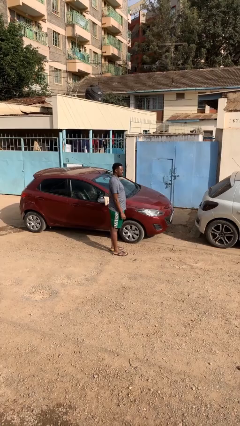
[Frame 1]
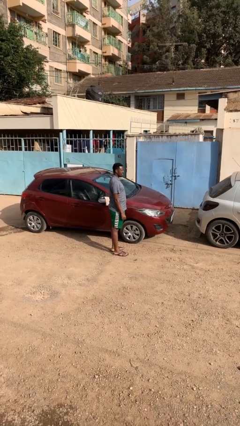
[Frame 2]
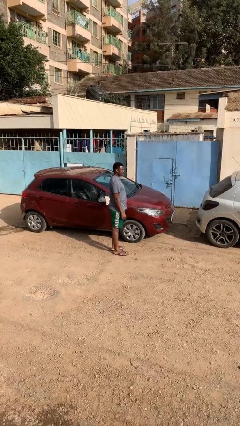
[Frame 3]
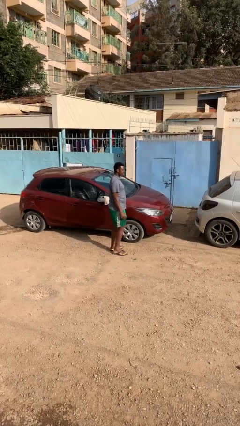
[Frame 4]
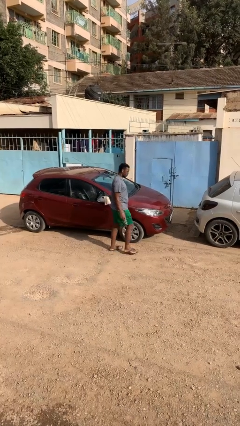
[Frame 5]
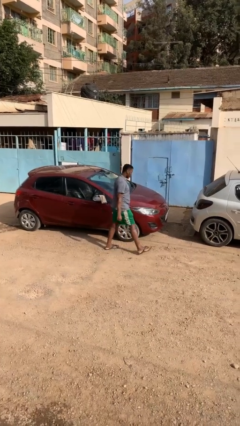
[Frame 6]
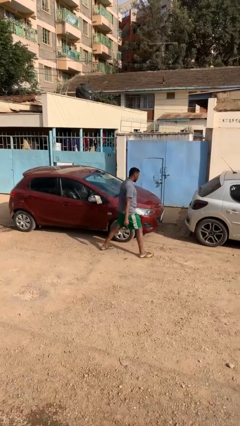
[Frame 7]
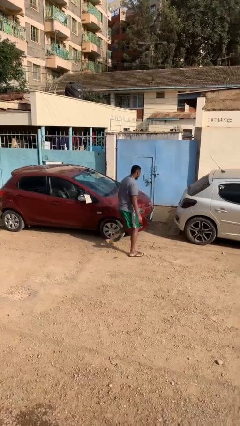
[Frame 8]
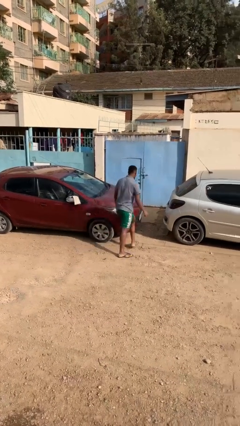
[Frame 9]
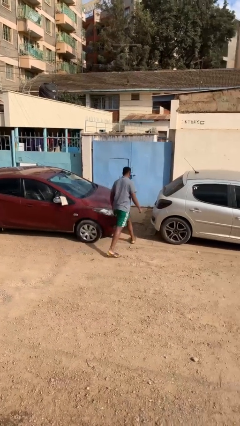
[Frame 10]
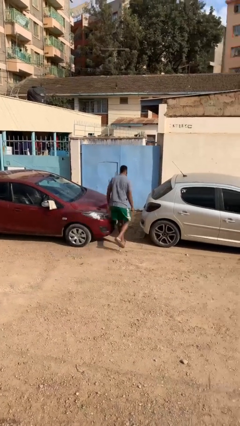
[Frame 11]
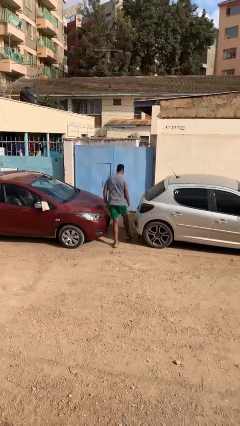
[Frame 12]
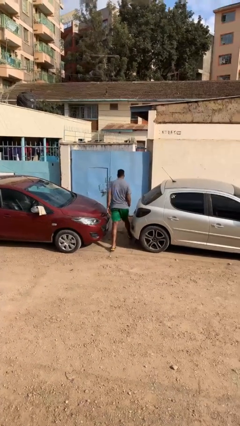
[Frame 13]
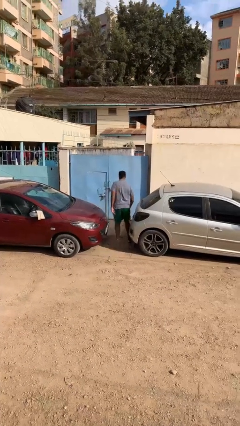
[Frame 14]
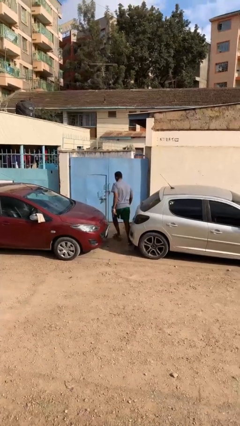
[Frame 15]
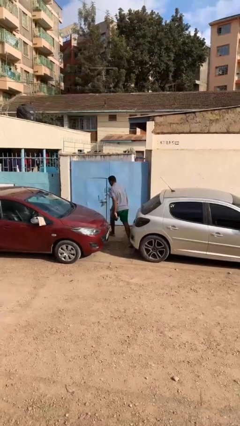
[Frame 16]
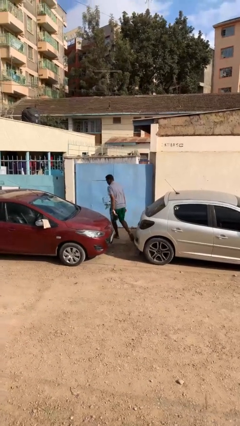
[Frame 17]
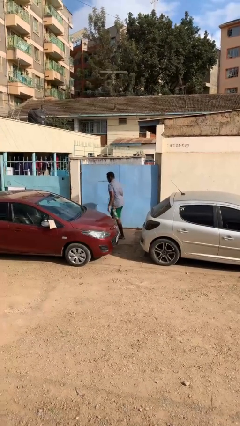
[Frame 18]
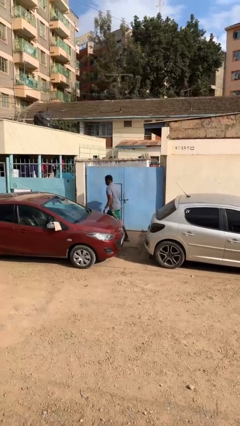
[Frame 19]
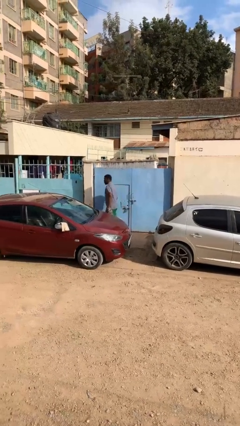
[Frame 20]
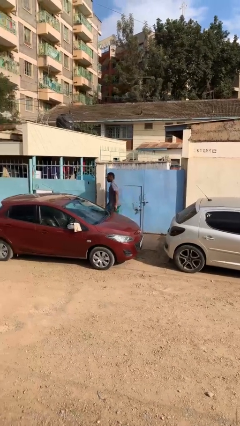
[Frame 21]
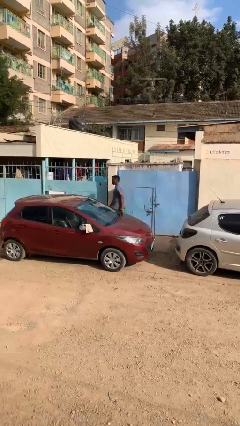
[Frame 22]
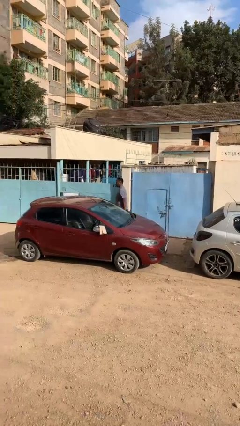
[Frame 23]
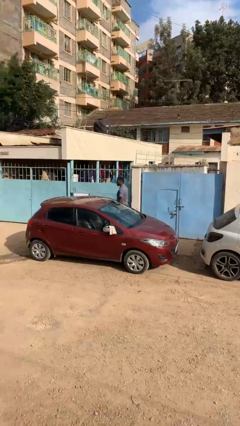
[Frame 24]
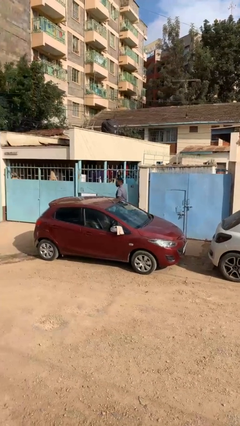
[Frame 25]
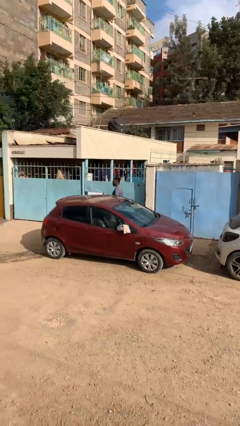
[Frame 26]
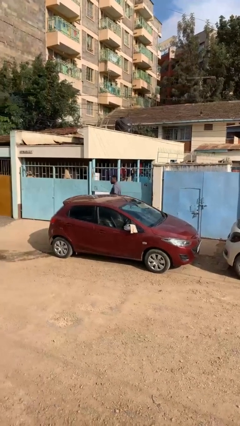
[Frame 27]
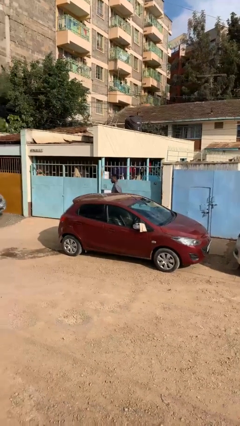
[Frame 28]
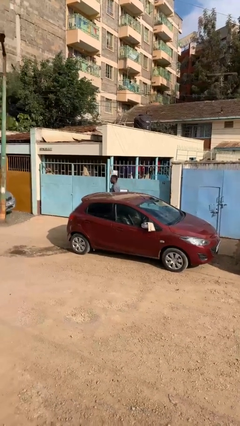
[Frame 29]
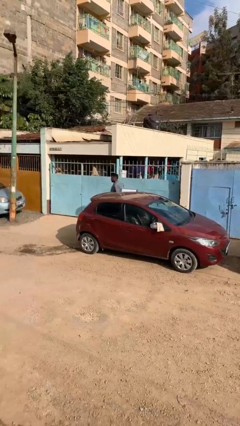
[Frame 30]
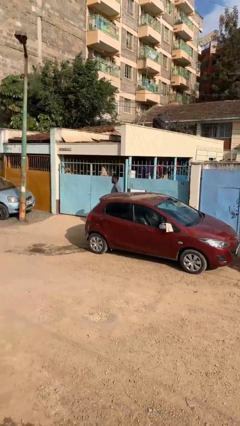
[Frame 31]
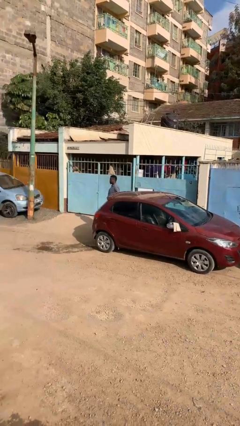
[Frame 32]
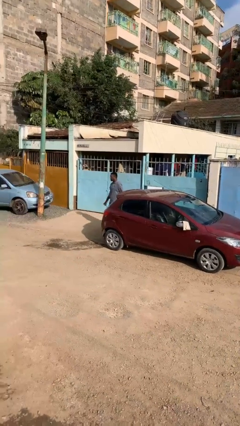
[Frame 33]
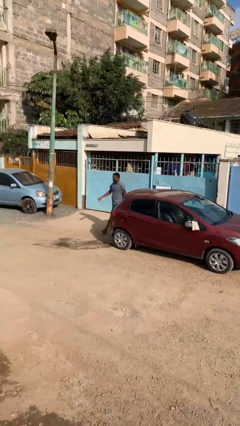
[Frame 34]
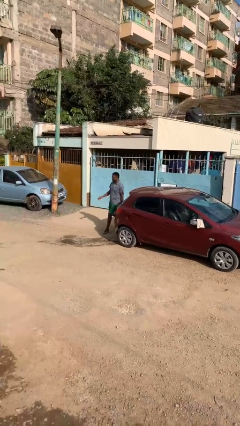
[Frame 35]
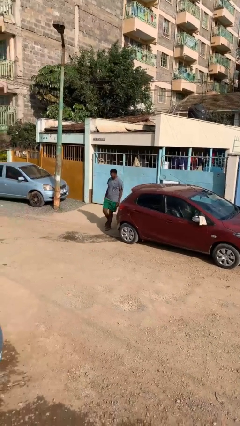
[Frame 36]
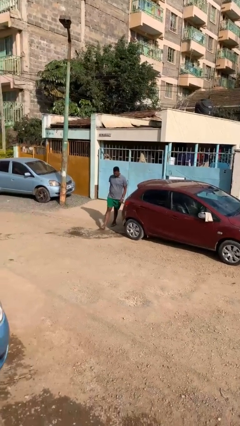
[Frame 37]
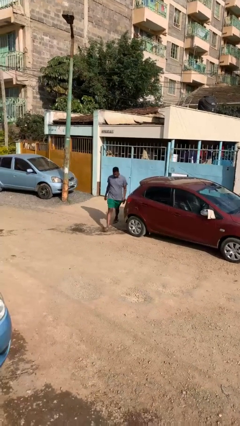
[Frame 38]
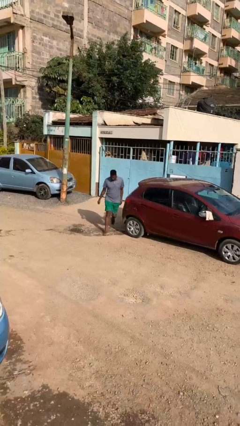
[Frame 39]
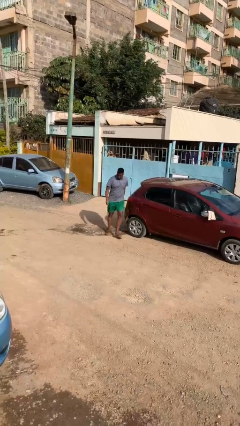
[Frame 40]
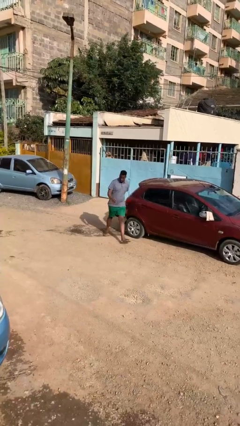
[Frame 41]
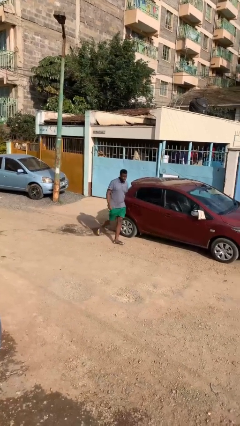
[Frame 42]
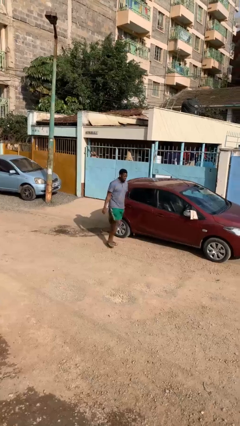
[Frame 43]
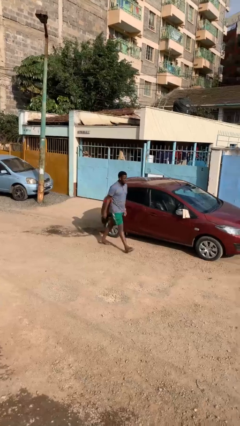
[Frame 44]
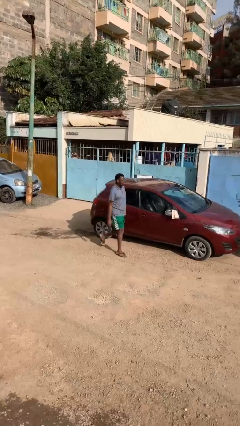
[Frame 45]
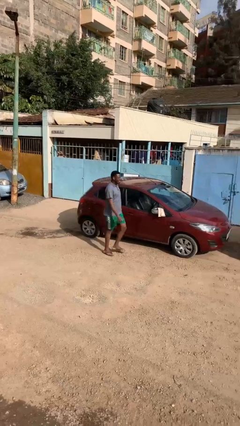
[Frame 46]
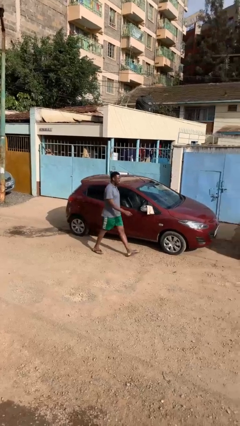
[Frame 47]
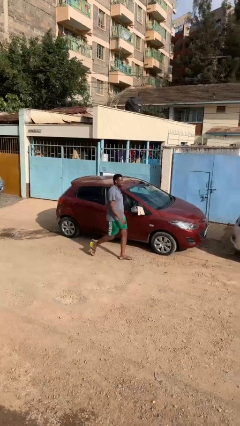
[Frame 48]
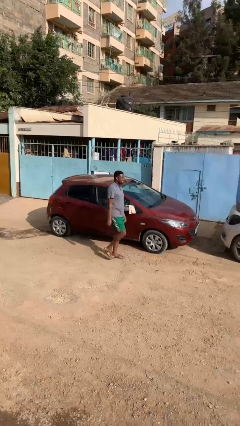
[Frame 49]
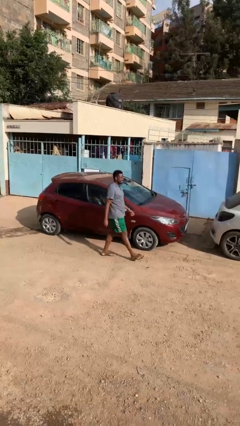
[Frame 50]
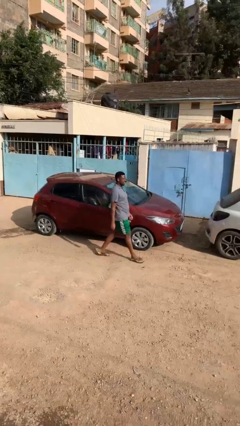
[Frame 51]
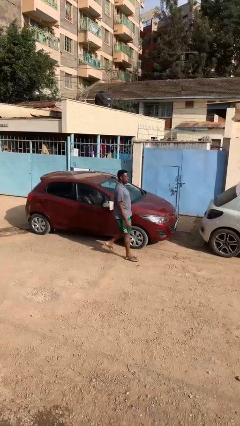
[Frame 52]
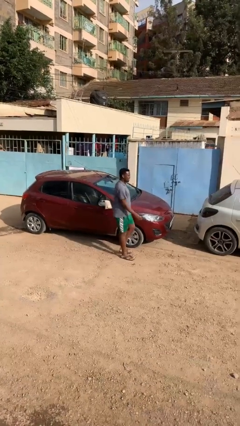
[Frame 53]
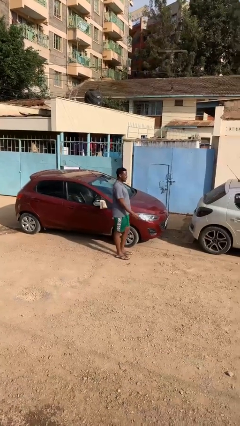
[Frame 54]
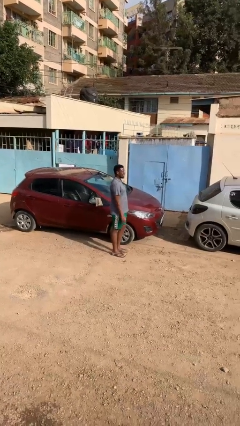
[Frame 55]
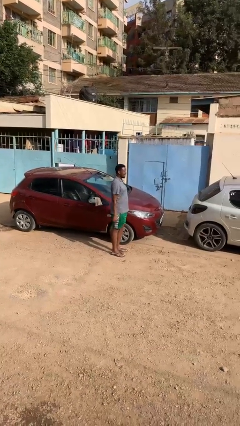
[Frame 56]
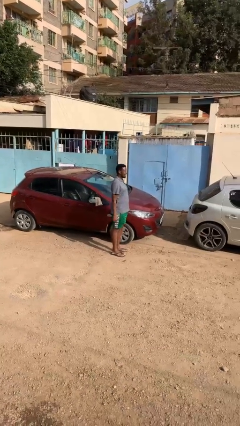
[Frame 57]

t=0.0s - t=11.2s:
person walks around car

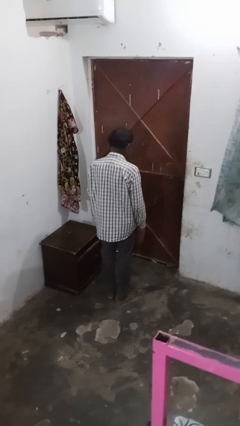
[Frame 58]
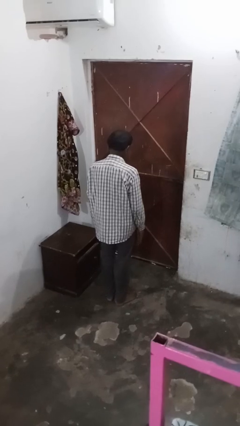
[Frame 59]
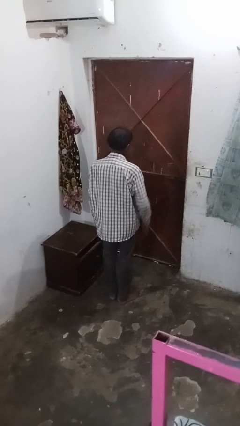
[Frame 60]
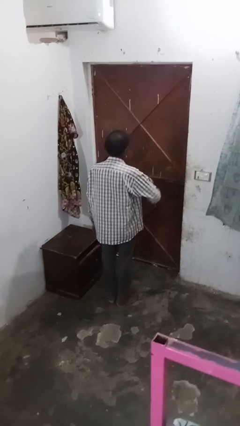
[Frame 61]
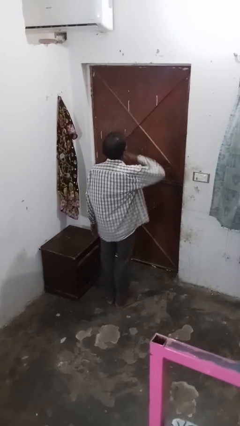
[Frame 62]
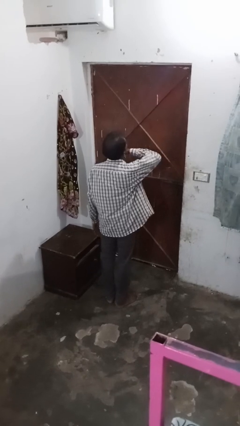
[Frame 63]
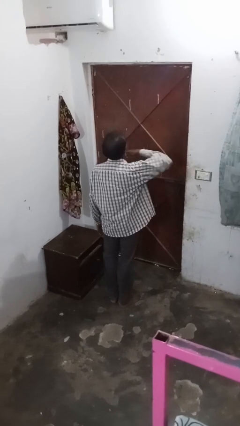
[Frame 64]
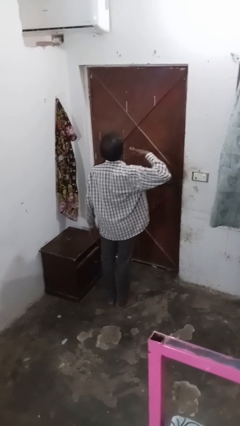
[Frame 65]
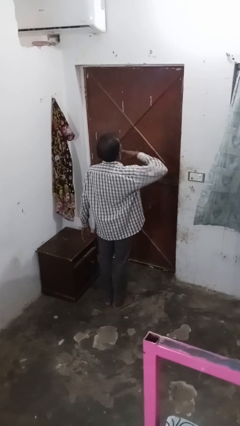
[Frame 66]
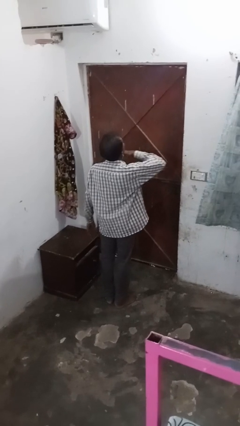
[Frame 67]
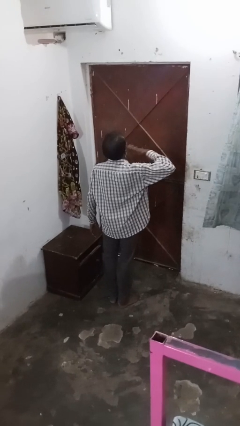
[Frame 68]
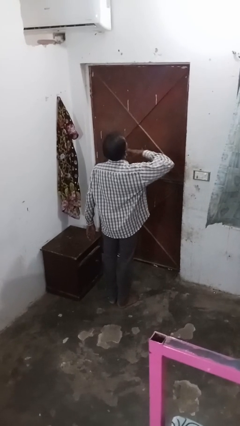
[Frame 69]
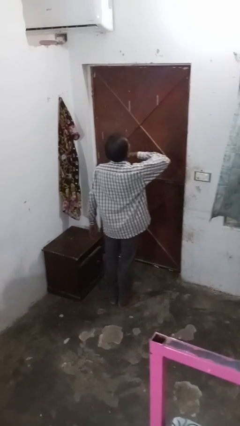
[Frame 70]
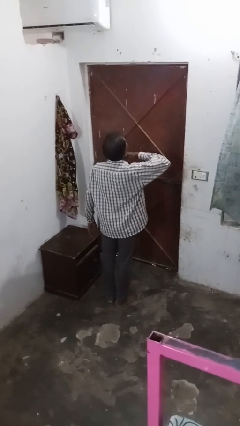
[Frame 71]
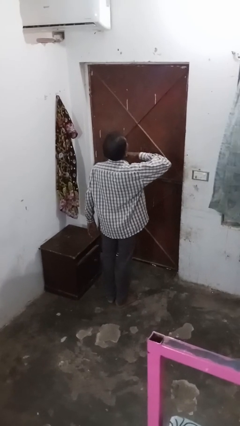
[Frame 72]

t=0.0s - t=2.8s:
person gestures cut

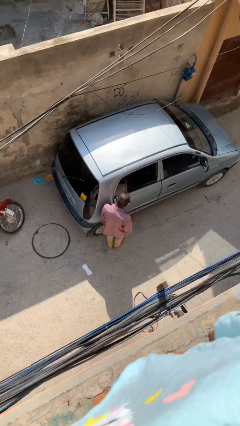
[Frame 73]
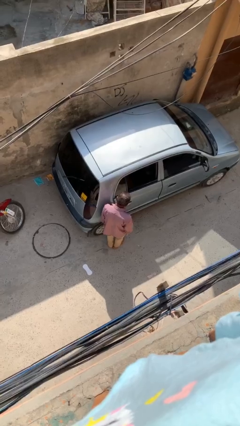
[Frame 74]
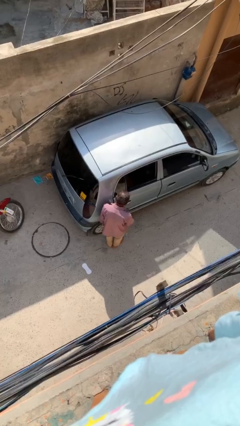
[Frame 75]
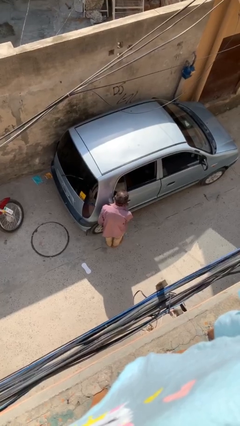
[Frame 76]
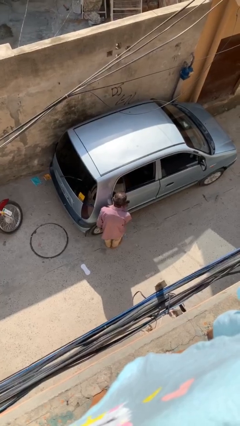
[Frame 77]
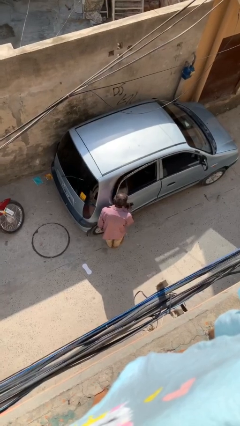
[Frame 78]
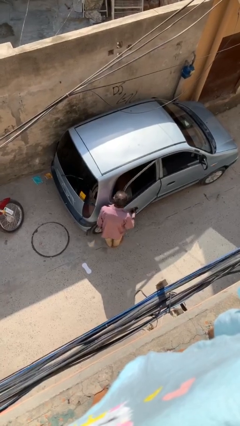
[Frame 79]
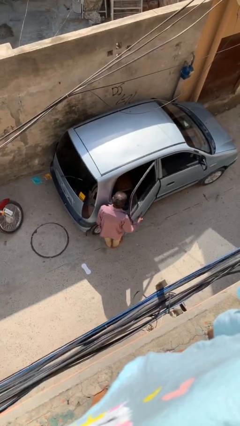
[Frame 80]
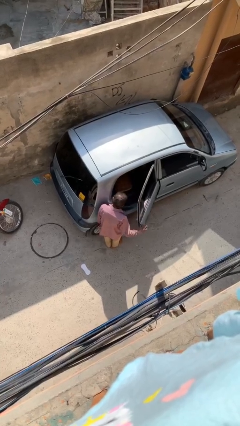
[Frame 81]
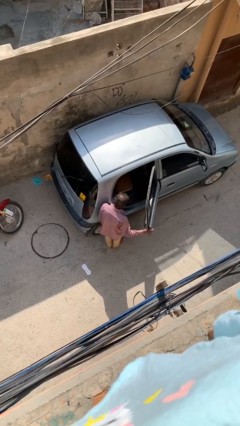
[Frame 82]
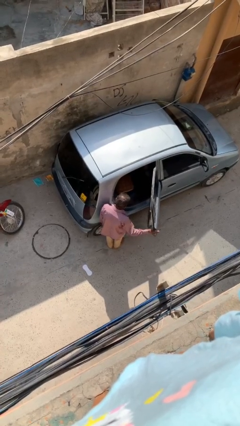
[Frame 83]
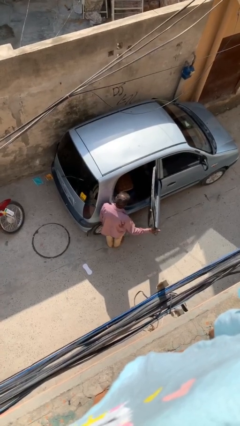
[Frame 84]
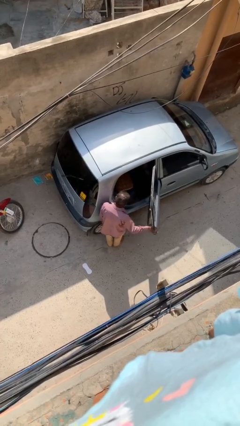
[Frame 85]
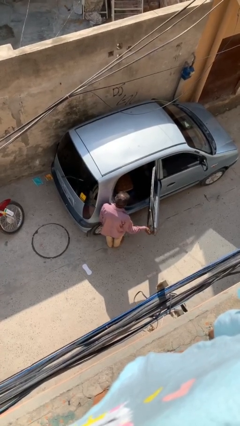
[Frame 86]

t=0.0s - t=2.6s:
person opens car door

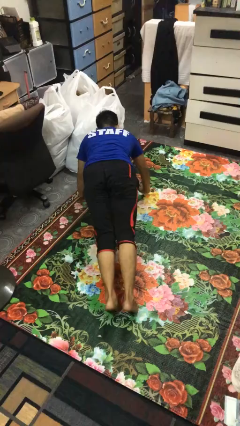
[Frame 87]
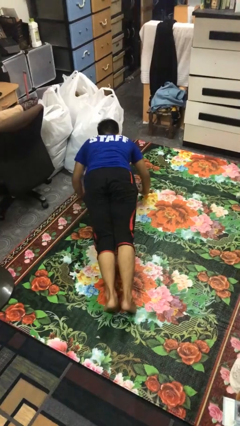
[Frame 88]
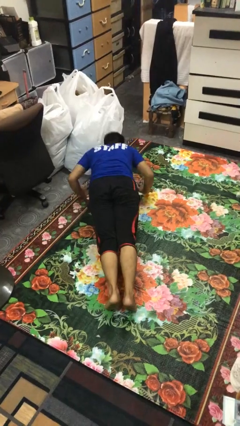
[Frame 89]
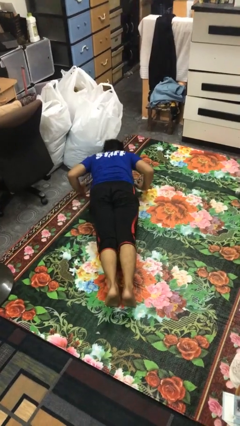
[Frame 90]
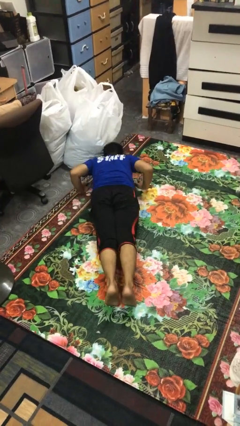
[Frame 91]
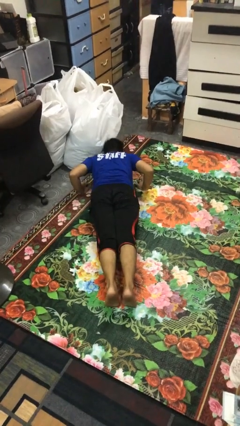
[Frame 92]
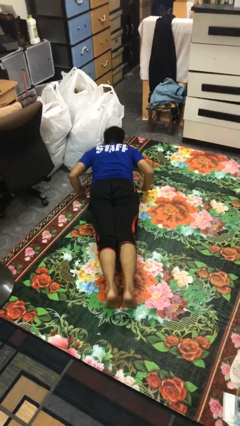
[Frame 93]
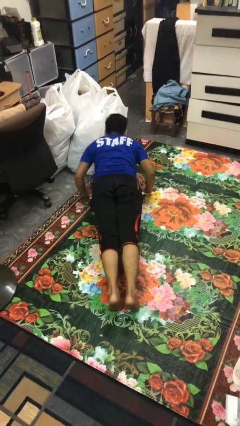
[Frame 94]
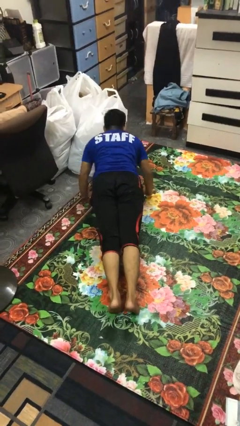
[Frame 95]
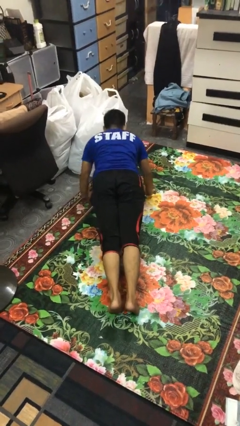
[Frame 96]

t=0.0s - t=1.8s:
person exercises with pushup
